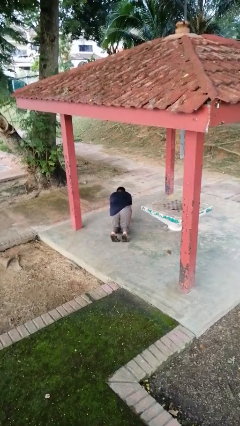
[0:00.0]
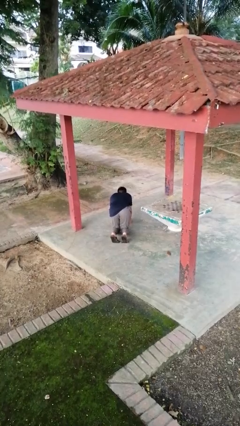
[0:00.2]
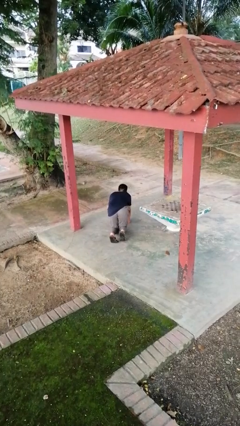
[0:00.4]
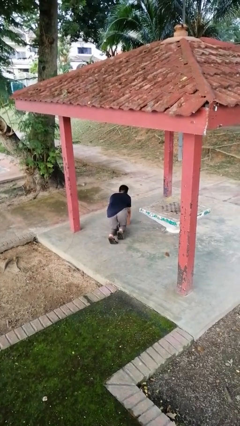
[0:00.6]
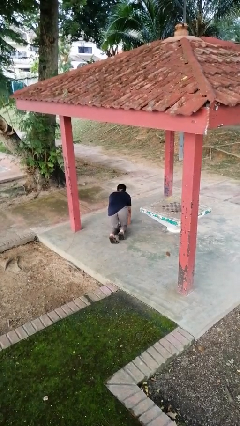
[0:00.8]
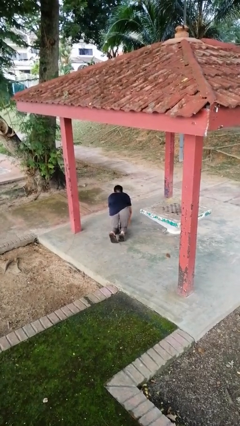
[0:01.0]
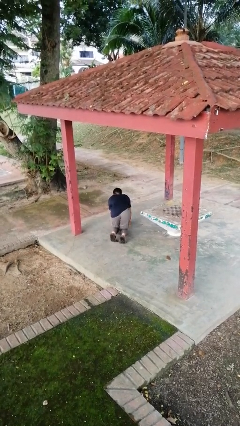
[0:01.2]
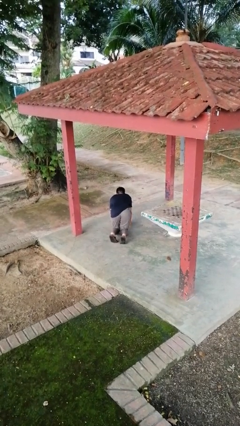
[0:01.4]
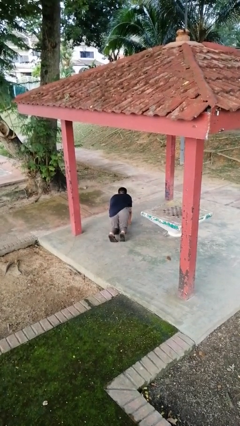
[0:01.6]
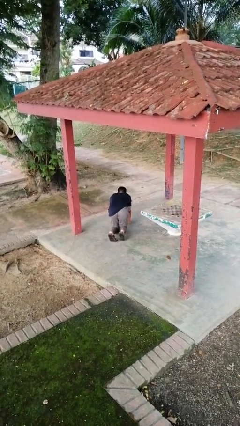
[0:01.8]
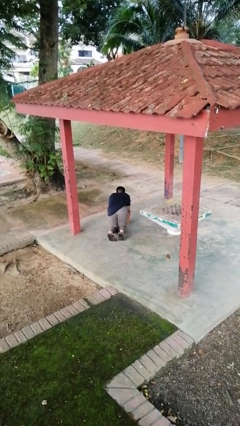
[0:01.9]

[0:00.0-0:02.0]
person crawls

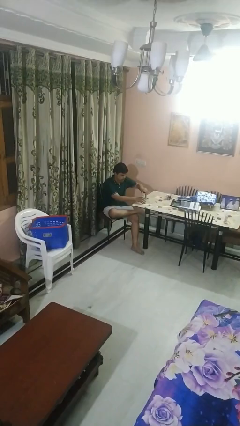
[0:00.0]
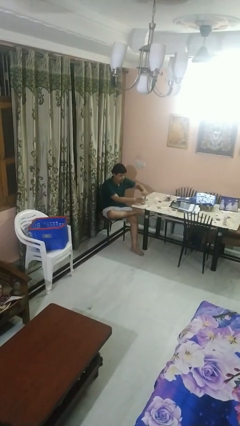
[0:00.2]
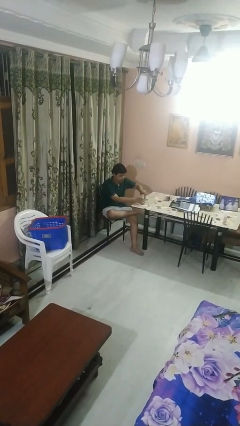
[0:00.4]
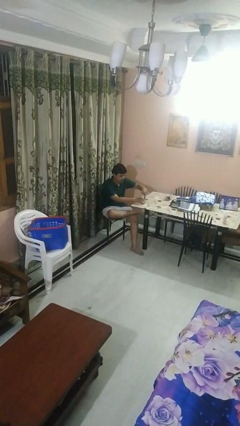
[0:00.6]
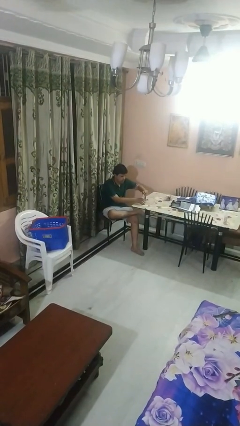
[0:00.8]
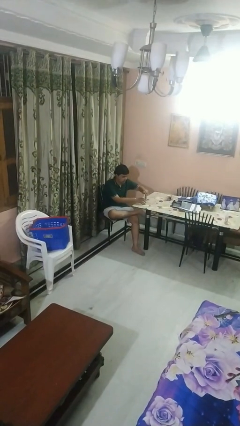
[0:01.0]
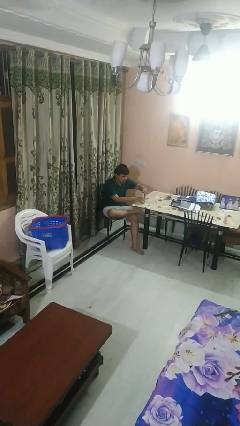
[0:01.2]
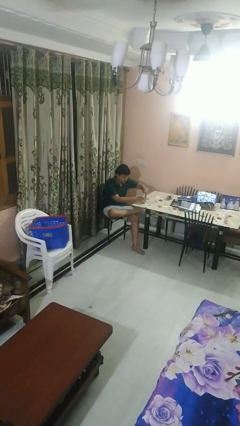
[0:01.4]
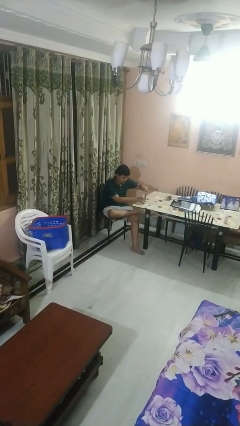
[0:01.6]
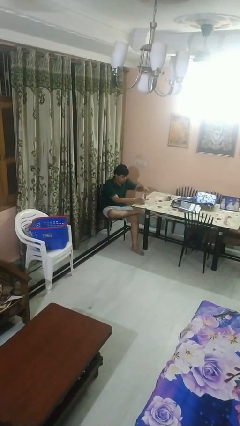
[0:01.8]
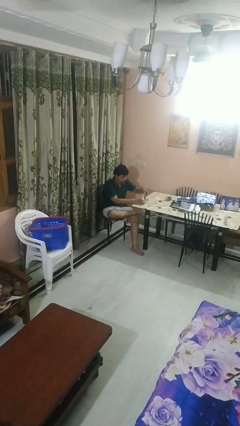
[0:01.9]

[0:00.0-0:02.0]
person unscrews lid from bottle

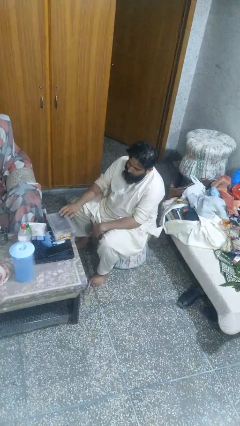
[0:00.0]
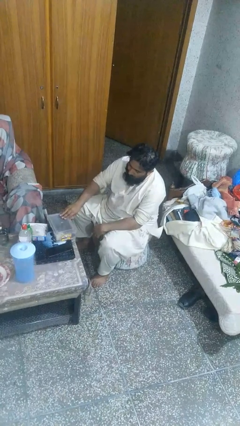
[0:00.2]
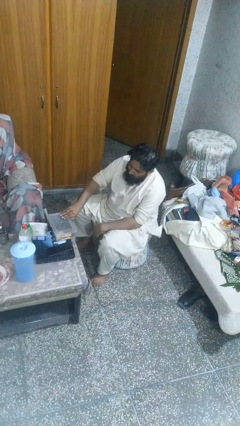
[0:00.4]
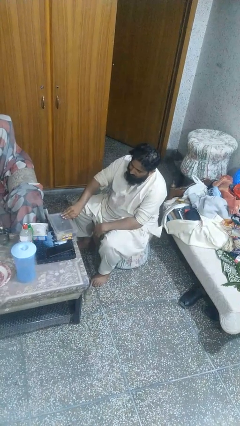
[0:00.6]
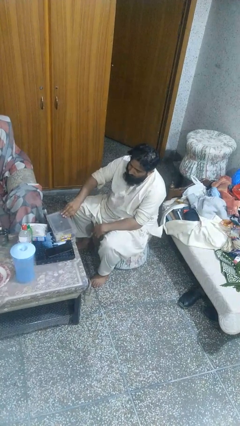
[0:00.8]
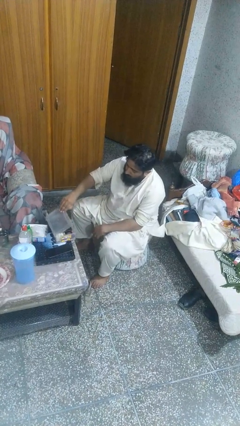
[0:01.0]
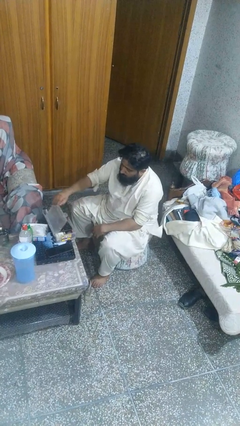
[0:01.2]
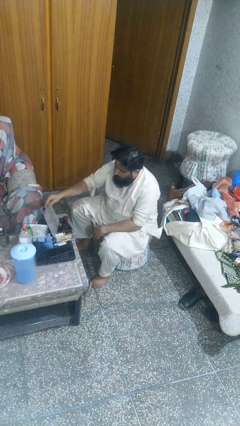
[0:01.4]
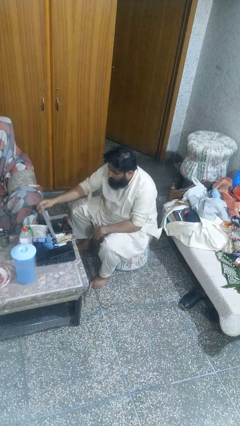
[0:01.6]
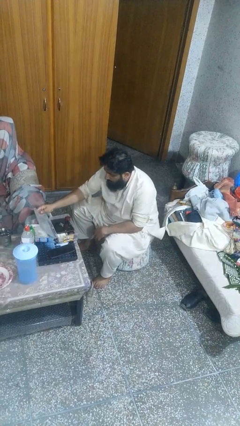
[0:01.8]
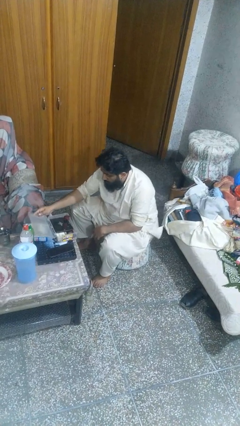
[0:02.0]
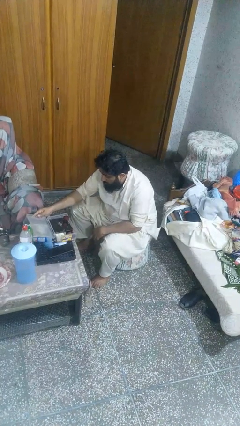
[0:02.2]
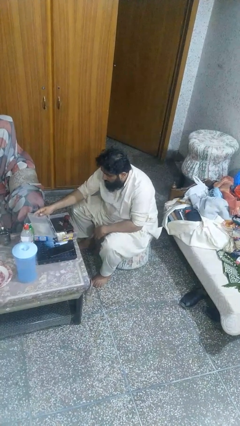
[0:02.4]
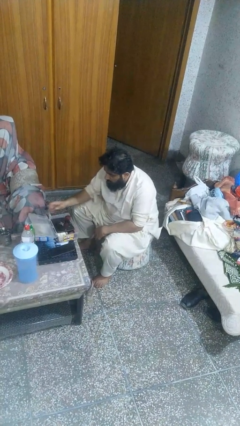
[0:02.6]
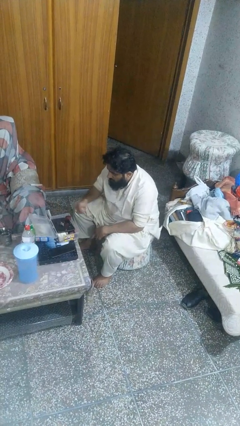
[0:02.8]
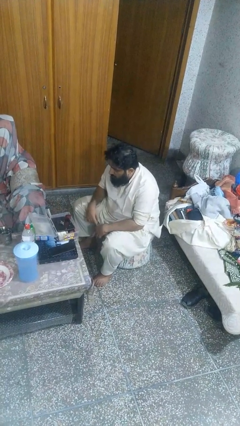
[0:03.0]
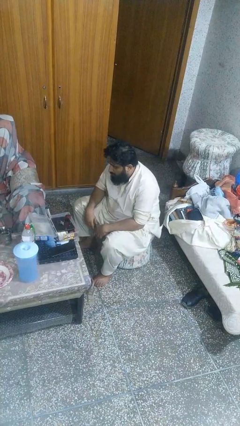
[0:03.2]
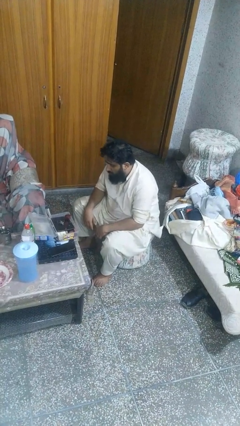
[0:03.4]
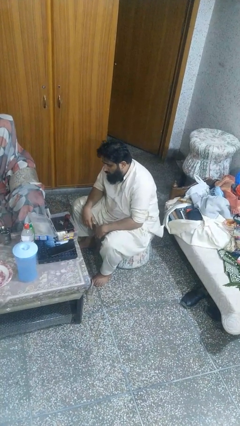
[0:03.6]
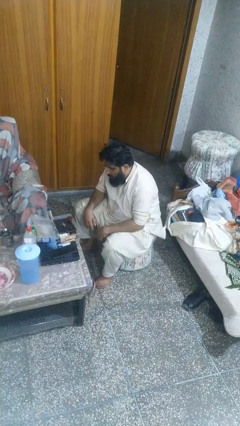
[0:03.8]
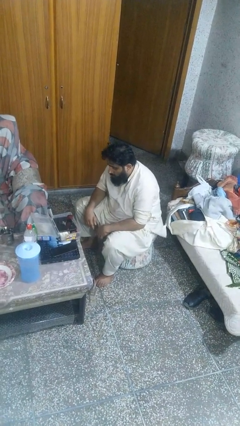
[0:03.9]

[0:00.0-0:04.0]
person opens jewelry box

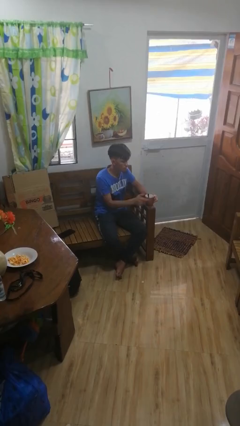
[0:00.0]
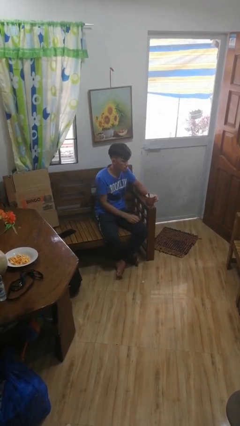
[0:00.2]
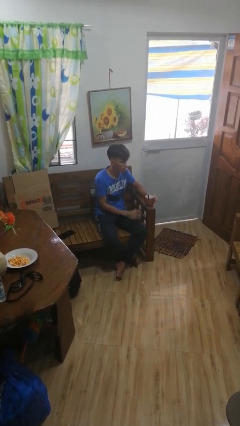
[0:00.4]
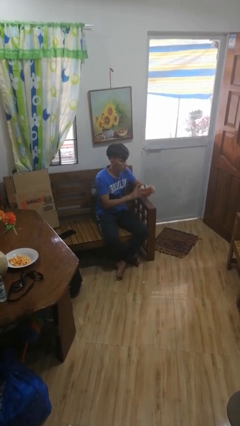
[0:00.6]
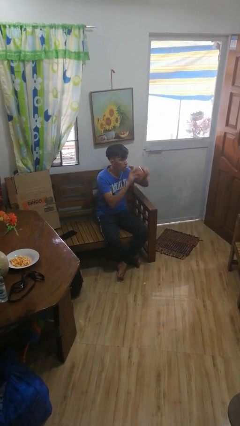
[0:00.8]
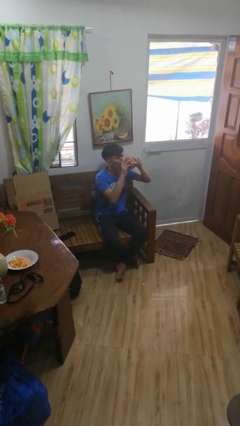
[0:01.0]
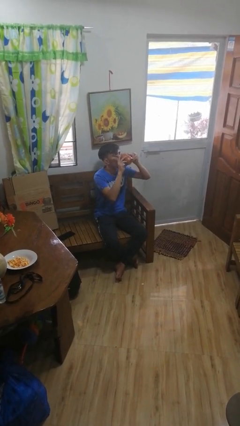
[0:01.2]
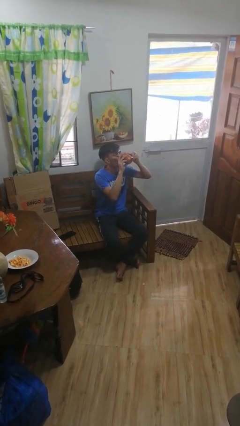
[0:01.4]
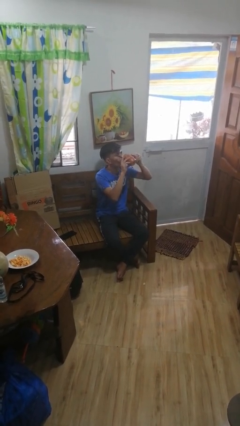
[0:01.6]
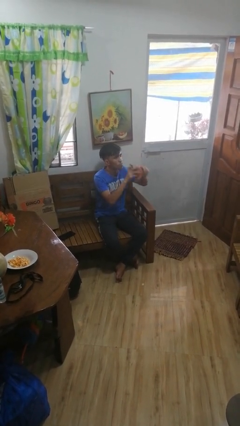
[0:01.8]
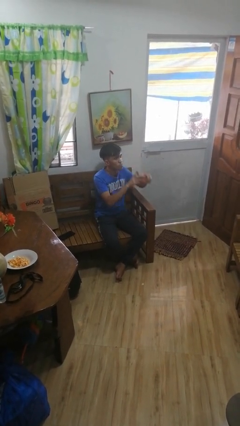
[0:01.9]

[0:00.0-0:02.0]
person drinks from mug

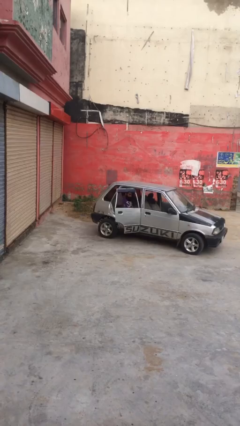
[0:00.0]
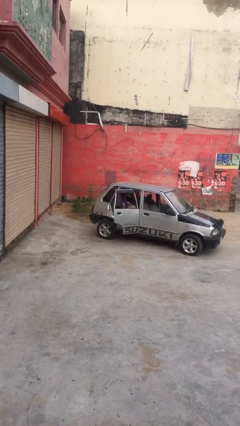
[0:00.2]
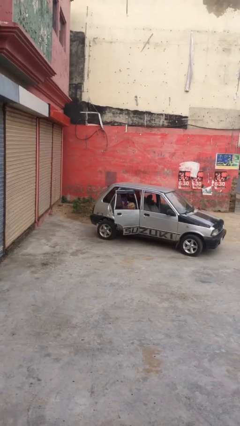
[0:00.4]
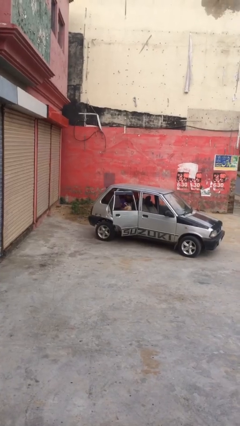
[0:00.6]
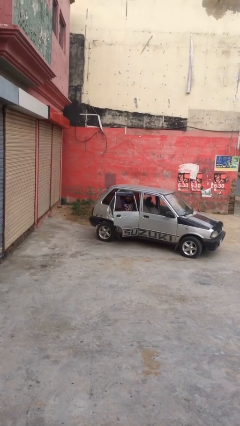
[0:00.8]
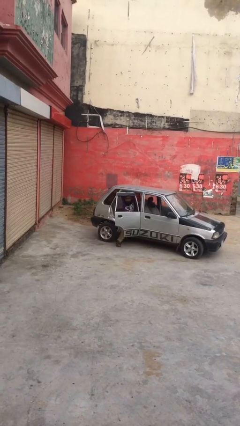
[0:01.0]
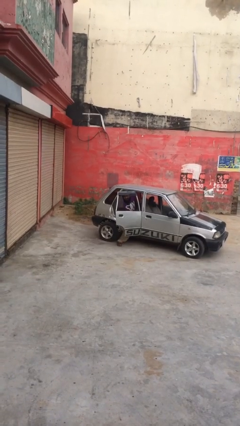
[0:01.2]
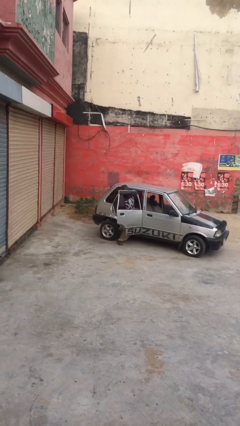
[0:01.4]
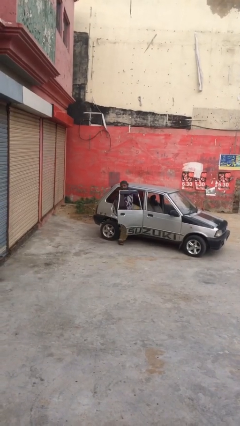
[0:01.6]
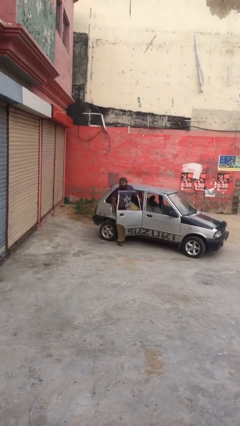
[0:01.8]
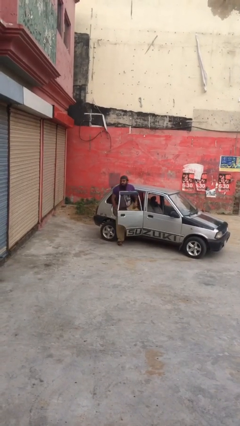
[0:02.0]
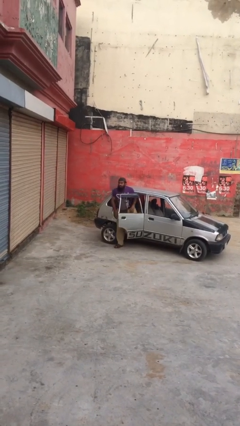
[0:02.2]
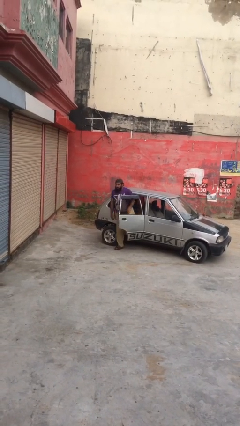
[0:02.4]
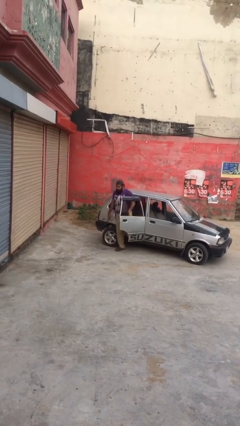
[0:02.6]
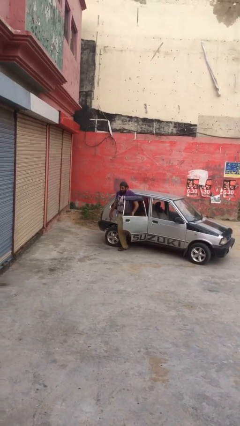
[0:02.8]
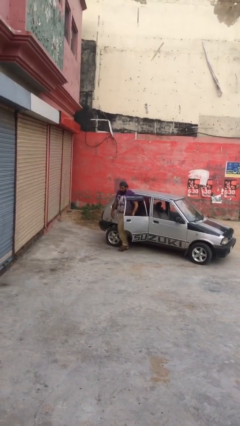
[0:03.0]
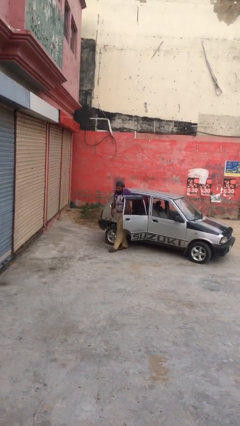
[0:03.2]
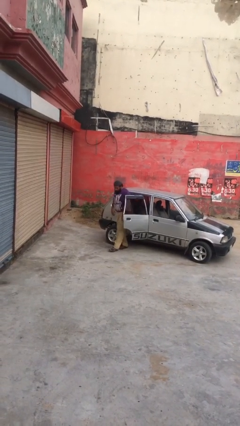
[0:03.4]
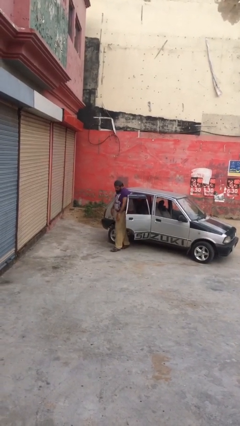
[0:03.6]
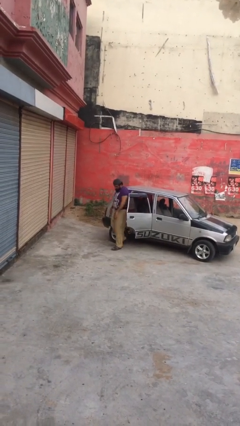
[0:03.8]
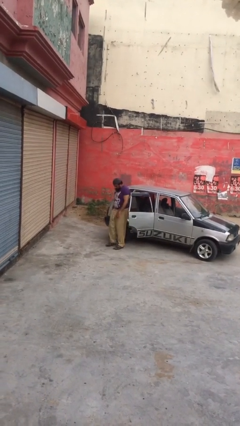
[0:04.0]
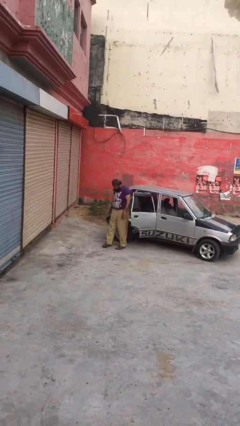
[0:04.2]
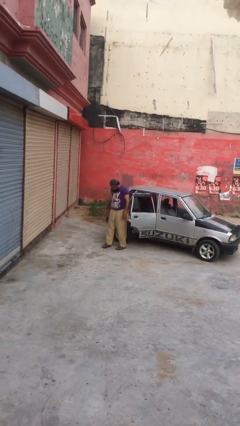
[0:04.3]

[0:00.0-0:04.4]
person exits car

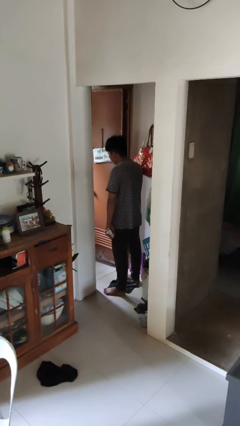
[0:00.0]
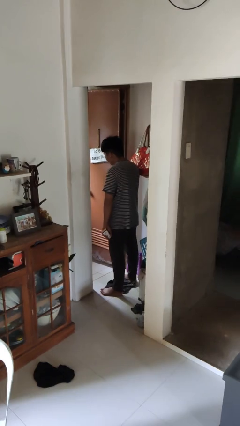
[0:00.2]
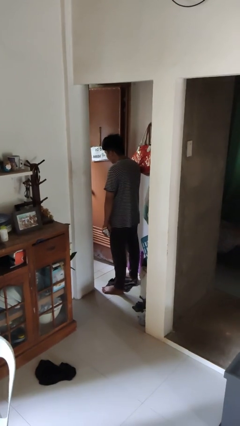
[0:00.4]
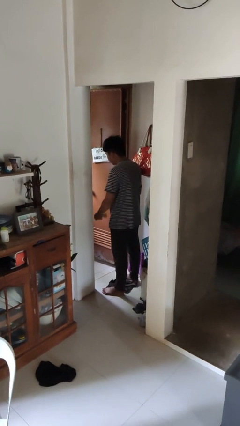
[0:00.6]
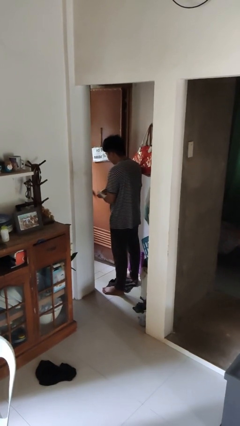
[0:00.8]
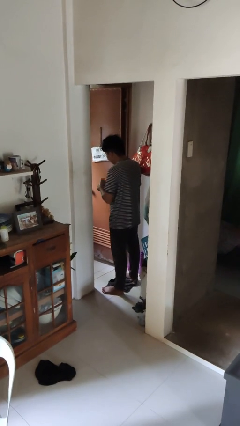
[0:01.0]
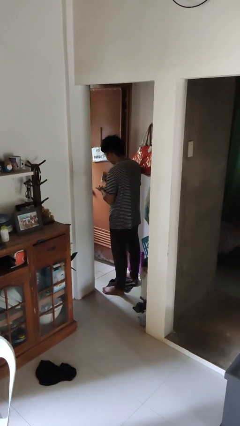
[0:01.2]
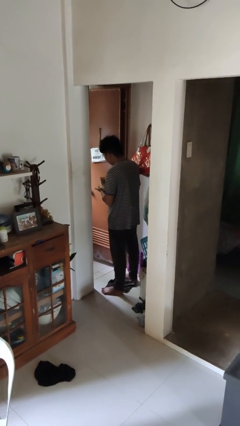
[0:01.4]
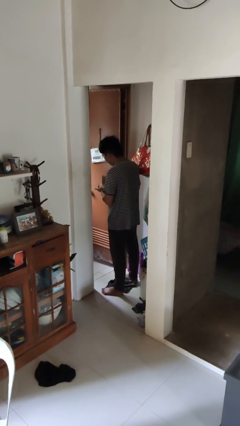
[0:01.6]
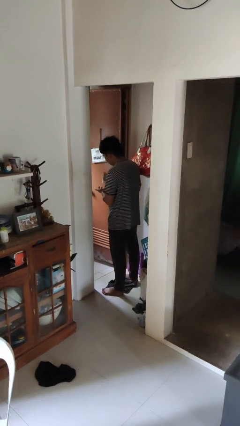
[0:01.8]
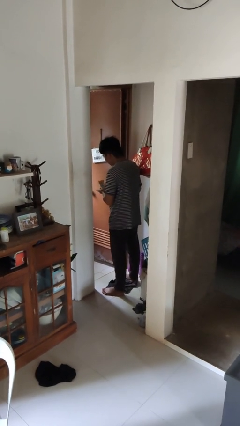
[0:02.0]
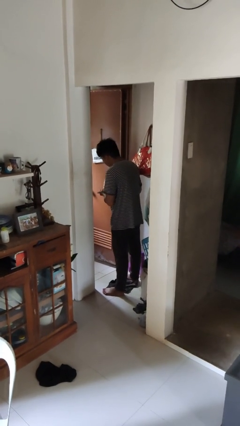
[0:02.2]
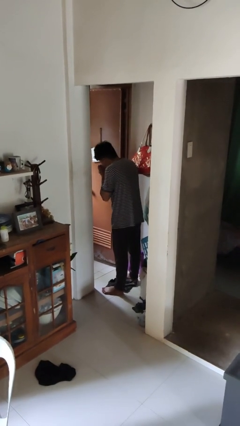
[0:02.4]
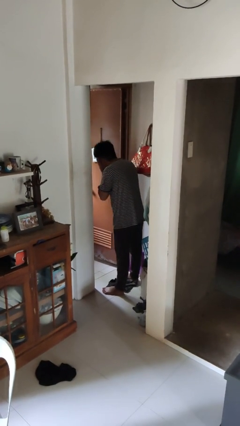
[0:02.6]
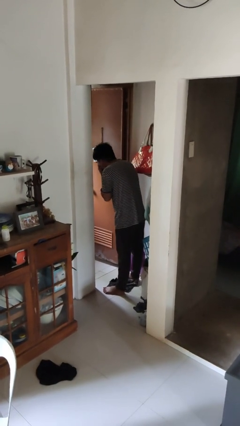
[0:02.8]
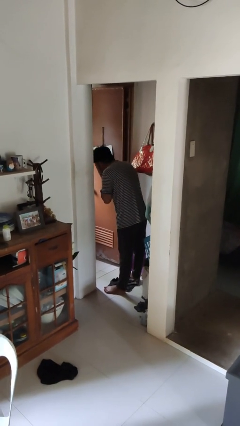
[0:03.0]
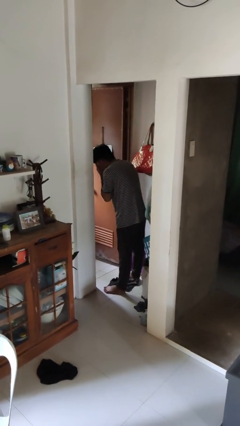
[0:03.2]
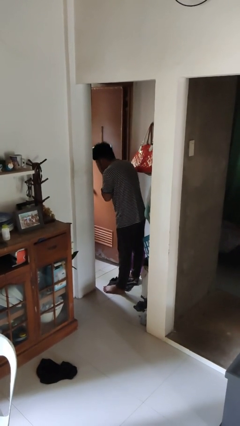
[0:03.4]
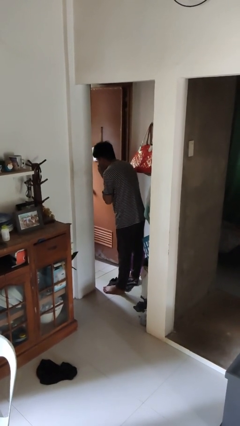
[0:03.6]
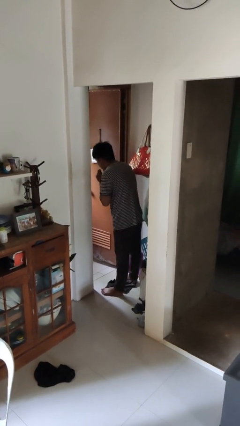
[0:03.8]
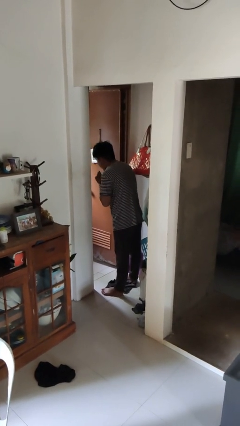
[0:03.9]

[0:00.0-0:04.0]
person applies facial moisturizer
